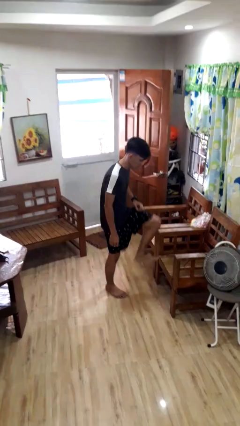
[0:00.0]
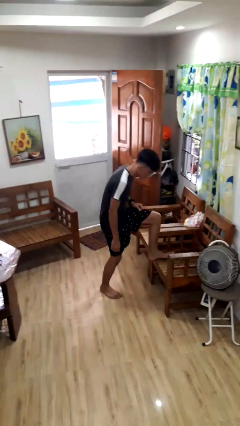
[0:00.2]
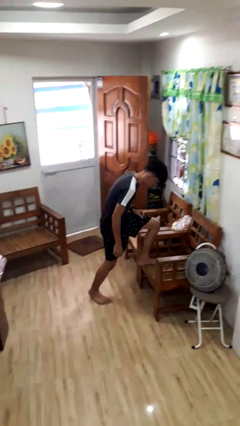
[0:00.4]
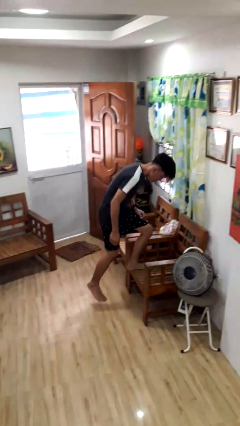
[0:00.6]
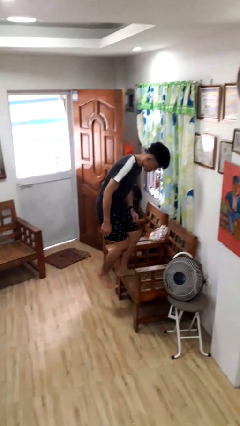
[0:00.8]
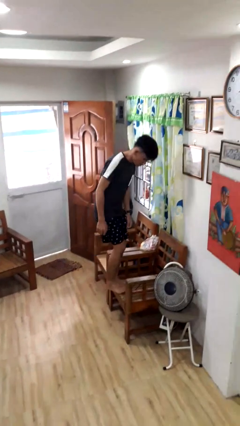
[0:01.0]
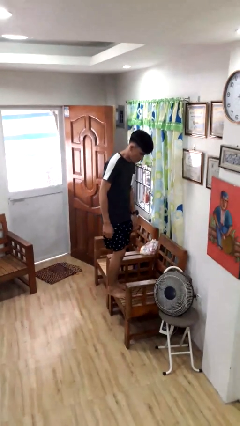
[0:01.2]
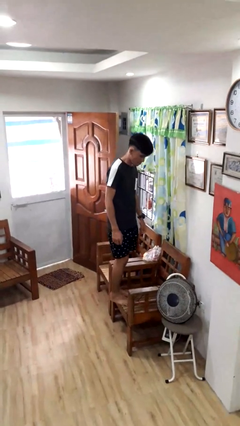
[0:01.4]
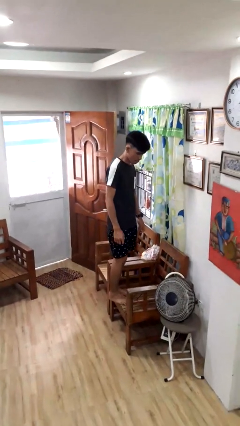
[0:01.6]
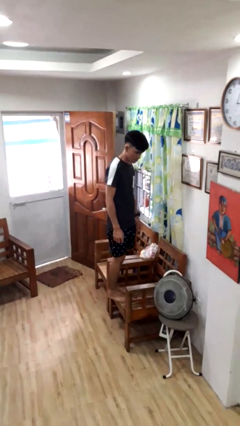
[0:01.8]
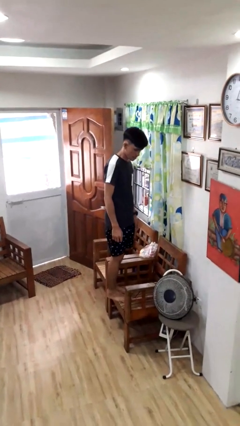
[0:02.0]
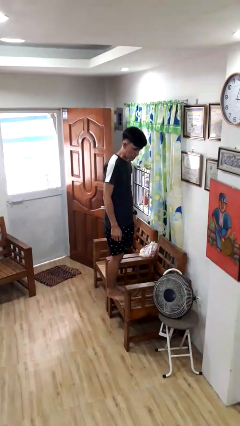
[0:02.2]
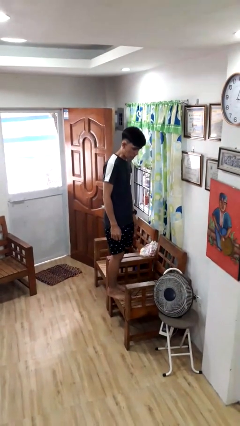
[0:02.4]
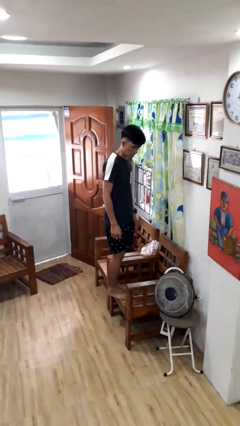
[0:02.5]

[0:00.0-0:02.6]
person climbs on chair

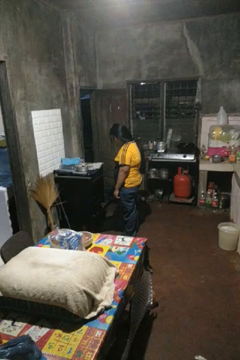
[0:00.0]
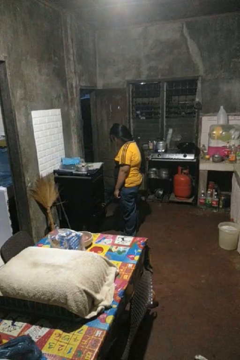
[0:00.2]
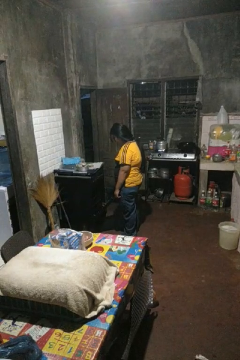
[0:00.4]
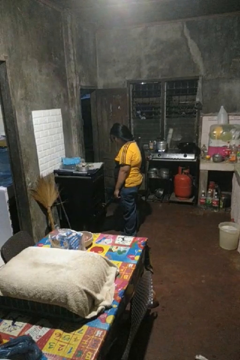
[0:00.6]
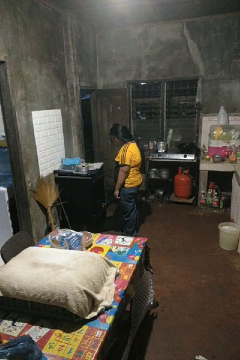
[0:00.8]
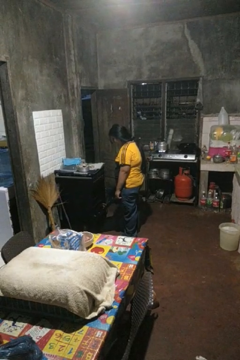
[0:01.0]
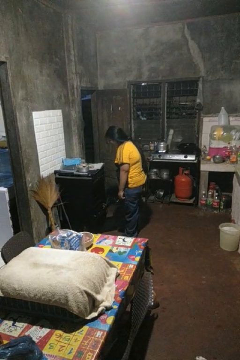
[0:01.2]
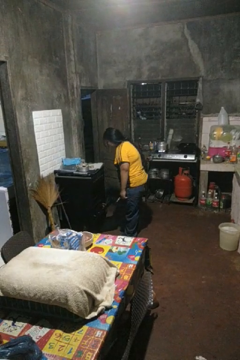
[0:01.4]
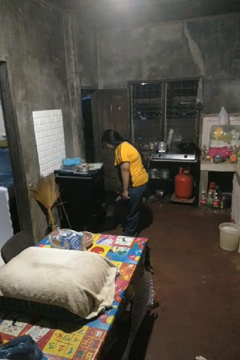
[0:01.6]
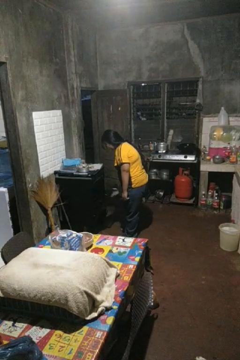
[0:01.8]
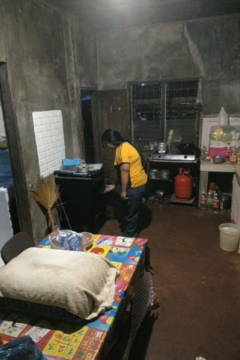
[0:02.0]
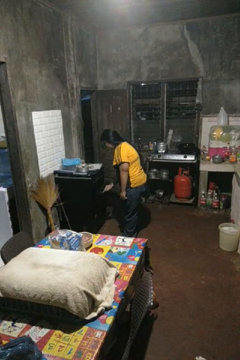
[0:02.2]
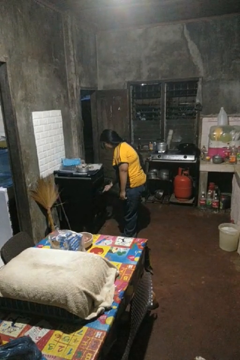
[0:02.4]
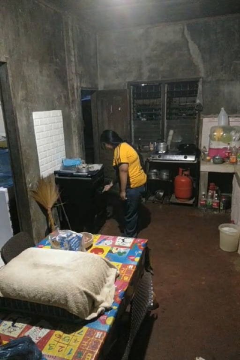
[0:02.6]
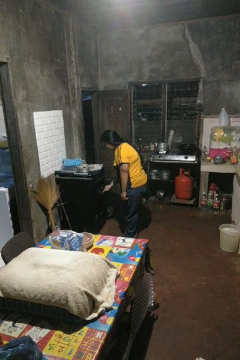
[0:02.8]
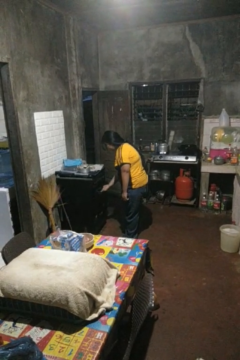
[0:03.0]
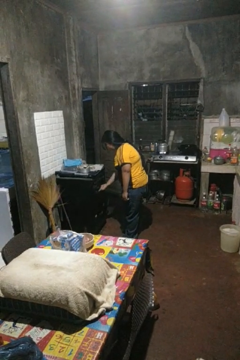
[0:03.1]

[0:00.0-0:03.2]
person closes oven door

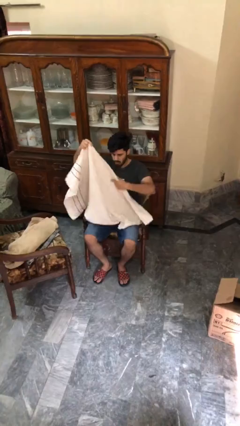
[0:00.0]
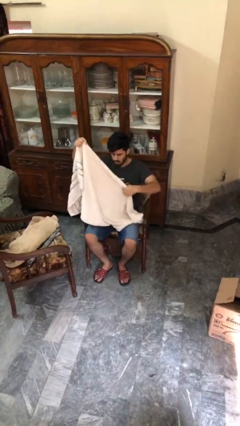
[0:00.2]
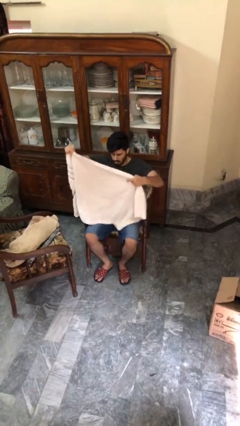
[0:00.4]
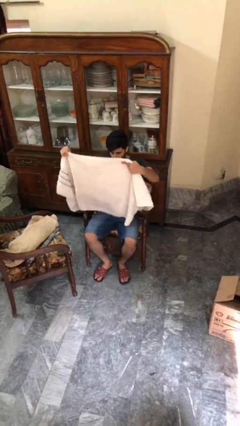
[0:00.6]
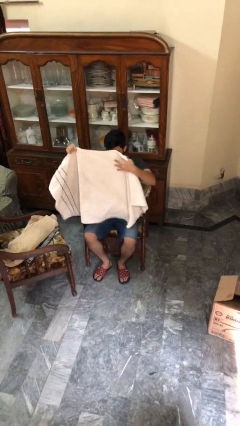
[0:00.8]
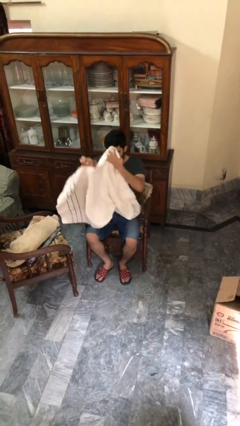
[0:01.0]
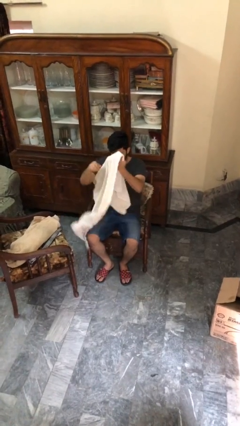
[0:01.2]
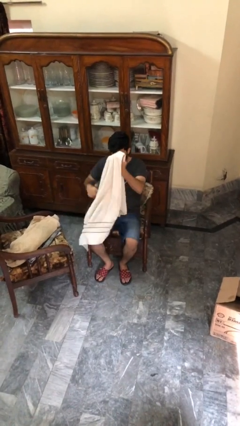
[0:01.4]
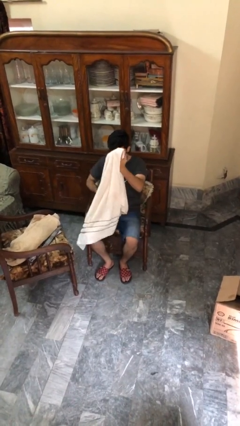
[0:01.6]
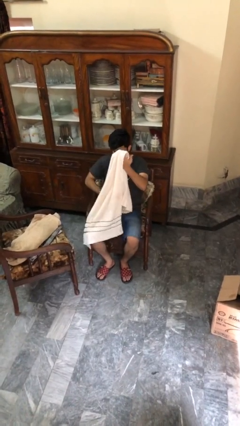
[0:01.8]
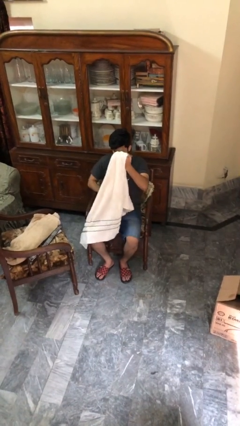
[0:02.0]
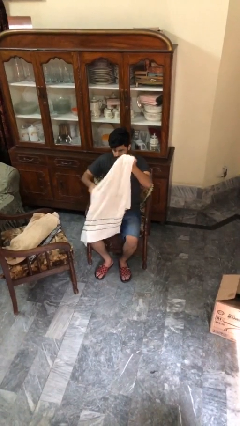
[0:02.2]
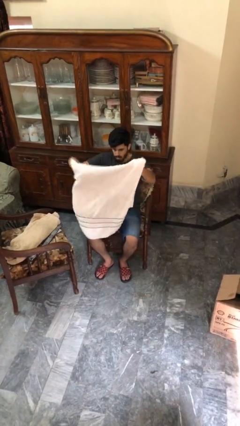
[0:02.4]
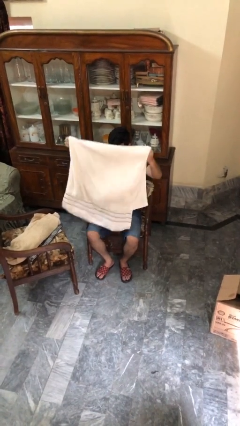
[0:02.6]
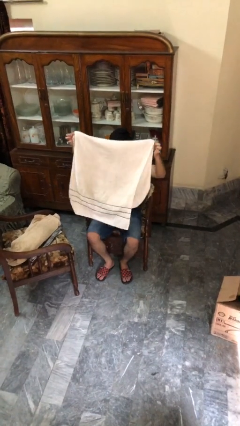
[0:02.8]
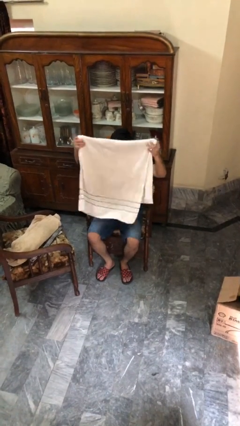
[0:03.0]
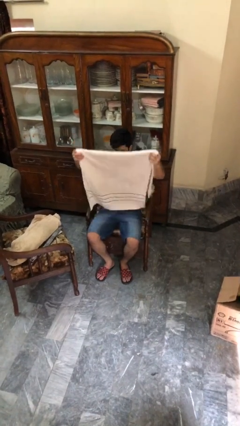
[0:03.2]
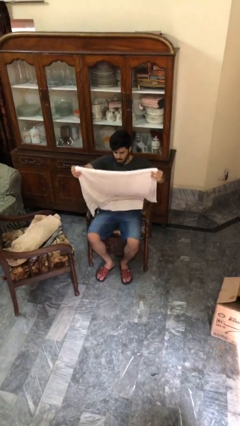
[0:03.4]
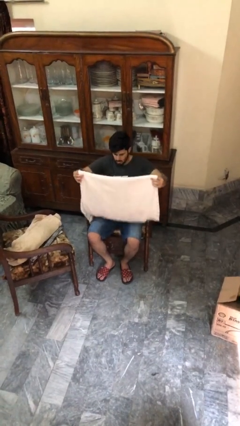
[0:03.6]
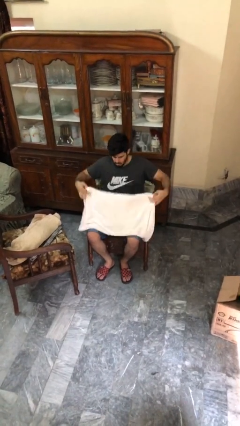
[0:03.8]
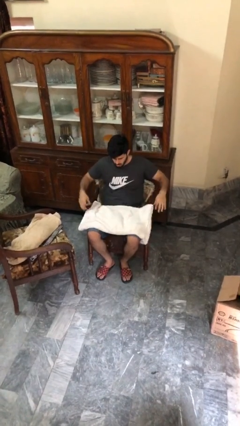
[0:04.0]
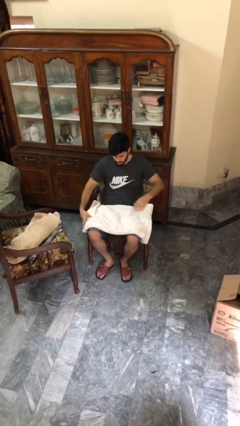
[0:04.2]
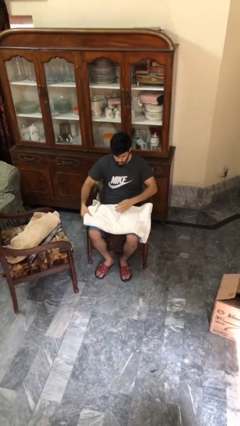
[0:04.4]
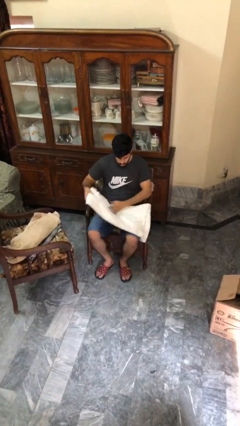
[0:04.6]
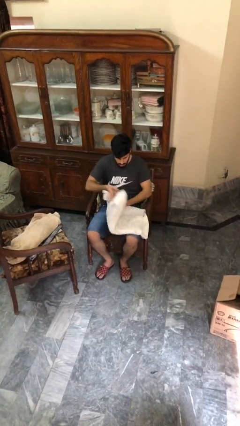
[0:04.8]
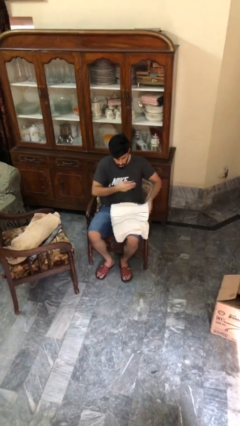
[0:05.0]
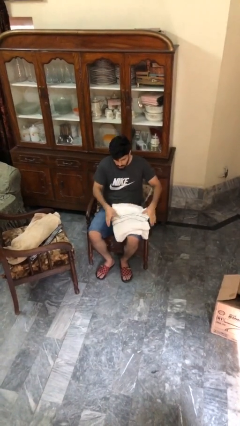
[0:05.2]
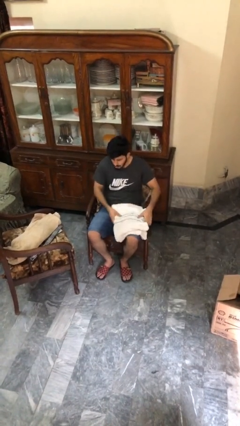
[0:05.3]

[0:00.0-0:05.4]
person folds towel

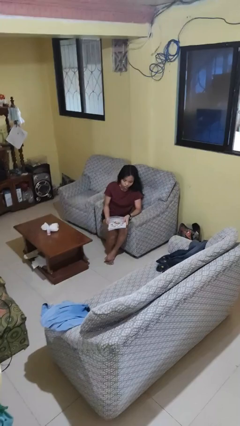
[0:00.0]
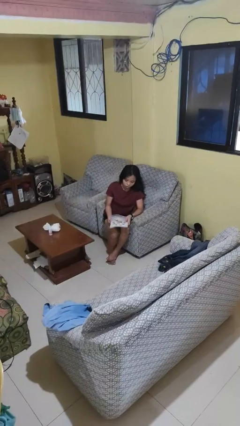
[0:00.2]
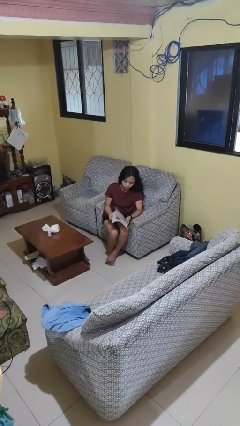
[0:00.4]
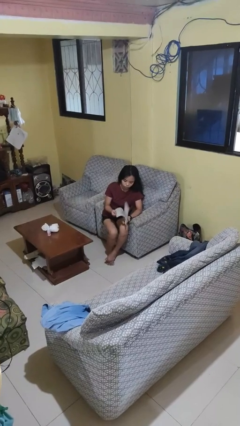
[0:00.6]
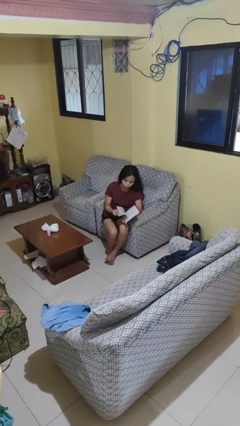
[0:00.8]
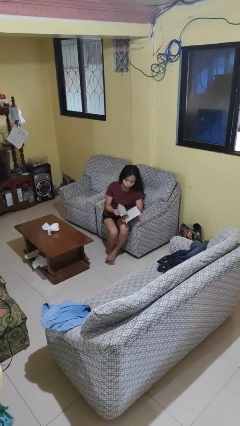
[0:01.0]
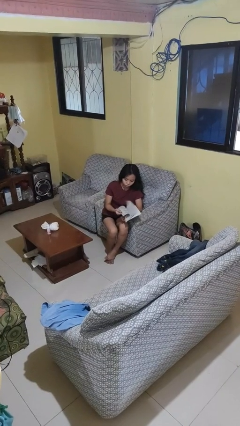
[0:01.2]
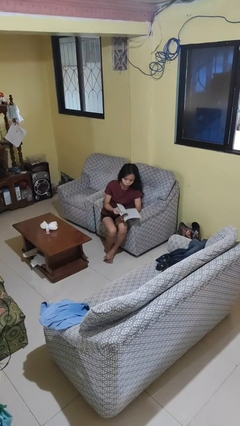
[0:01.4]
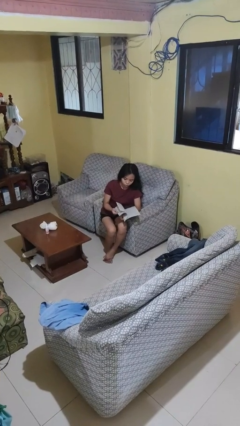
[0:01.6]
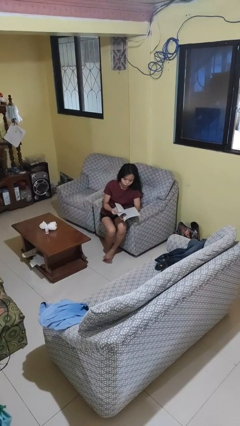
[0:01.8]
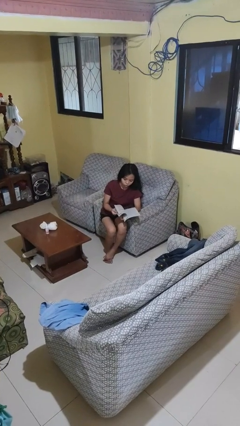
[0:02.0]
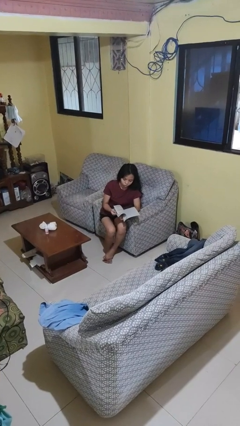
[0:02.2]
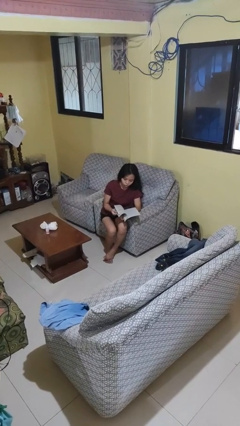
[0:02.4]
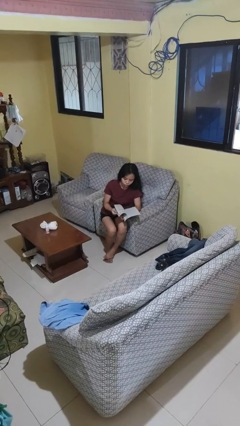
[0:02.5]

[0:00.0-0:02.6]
person reads book

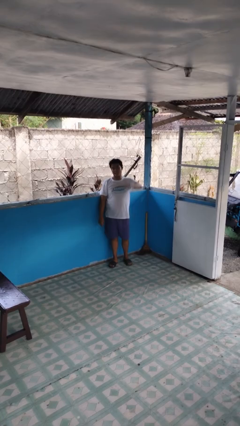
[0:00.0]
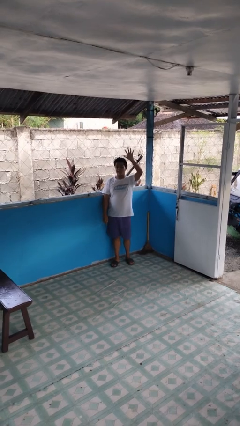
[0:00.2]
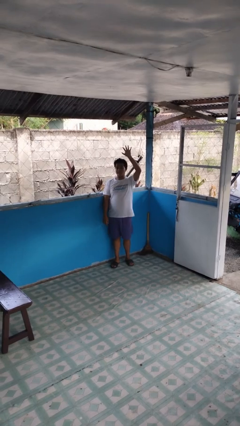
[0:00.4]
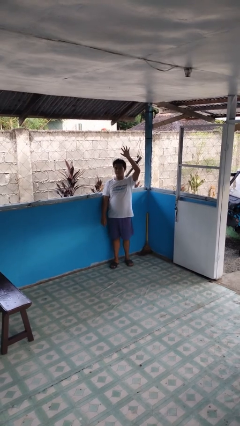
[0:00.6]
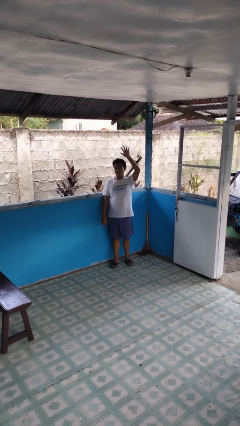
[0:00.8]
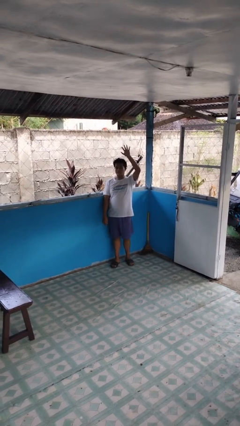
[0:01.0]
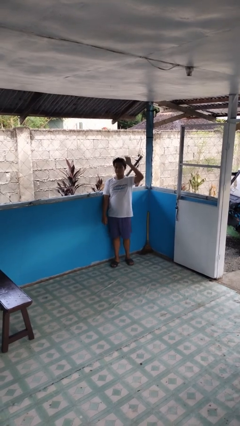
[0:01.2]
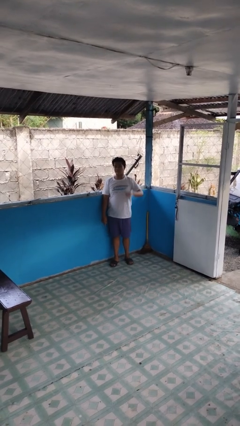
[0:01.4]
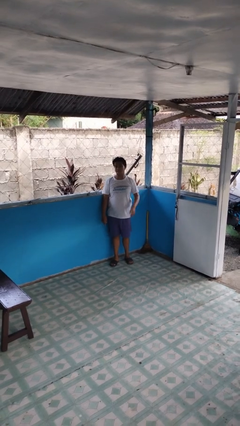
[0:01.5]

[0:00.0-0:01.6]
person gestures number five

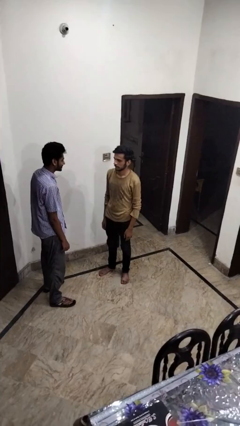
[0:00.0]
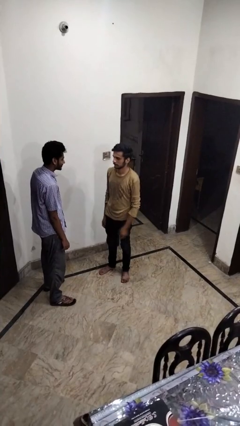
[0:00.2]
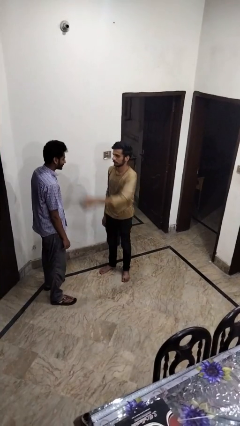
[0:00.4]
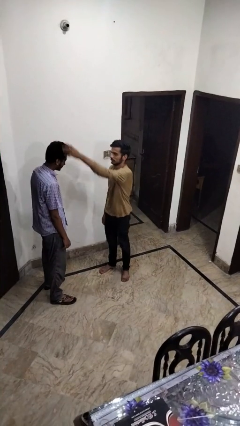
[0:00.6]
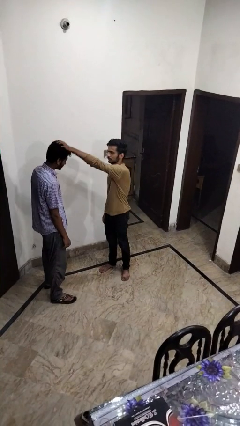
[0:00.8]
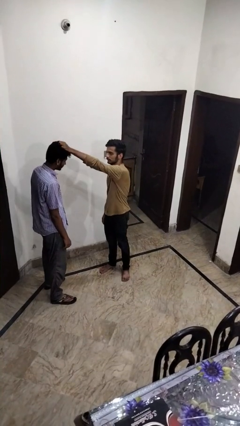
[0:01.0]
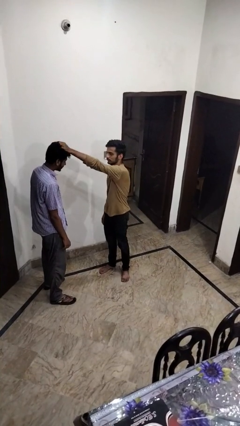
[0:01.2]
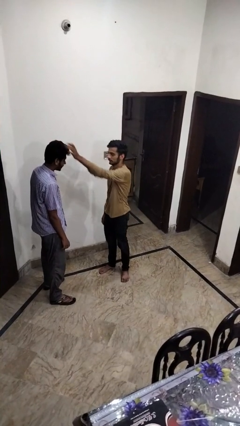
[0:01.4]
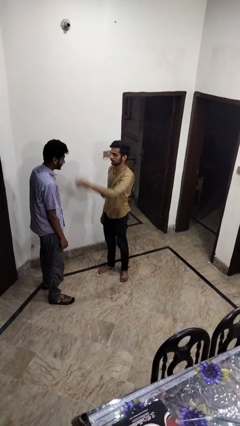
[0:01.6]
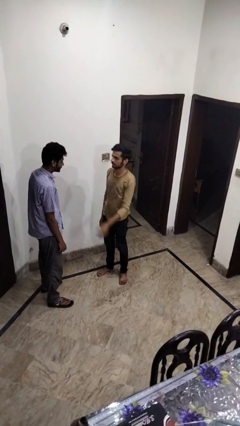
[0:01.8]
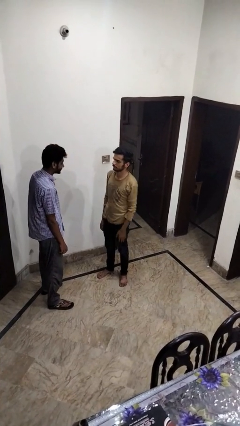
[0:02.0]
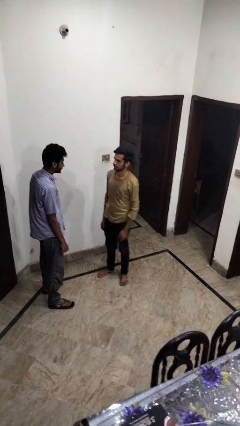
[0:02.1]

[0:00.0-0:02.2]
person grabs person by hair

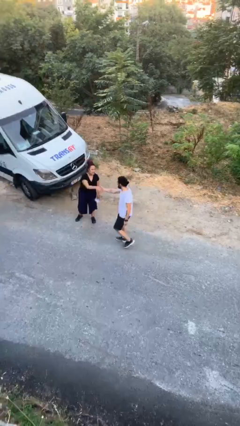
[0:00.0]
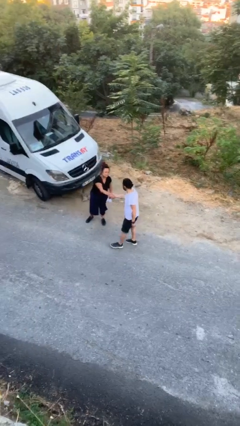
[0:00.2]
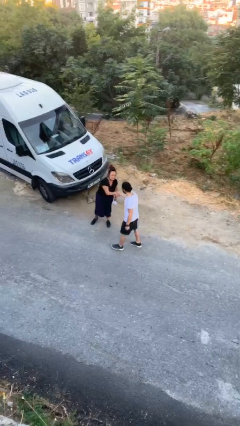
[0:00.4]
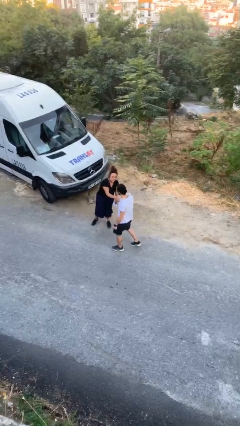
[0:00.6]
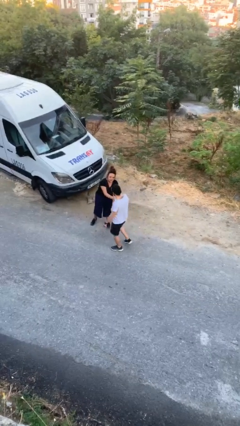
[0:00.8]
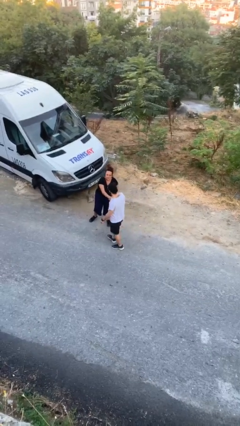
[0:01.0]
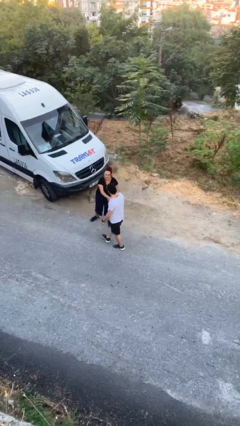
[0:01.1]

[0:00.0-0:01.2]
person shakes hand
